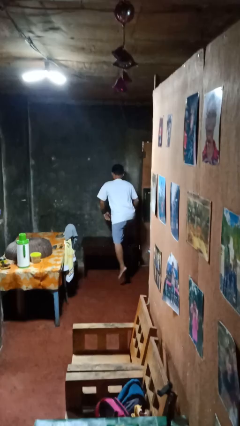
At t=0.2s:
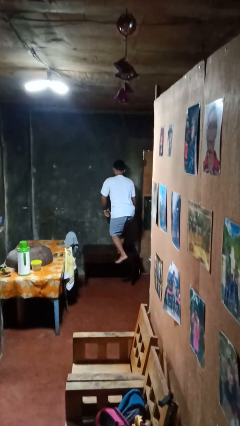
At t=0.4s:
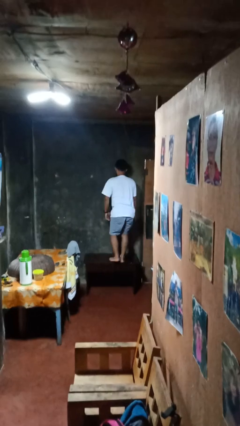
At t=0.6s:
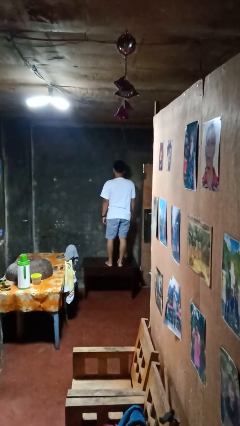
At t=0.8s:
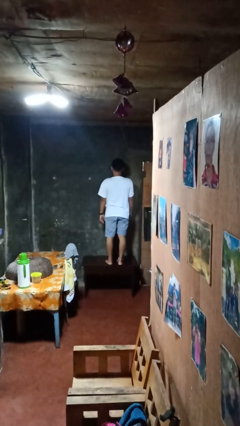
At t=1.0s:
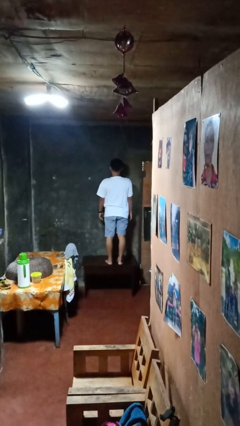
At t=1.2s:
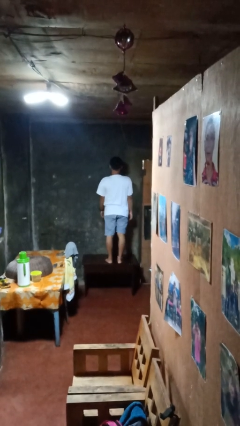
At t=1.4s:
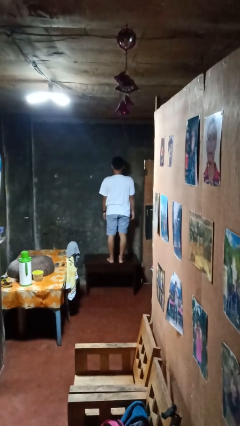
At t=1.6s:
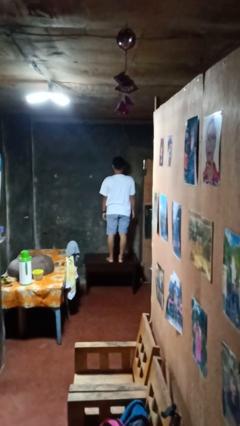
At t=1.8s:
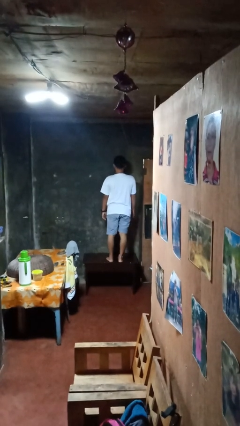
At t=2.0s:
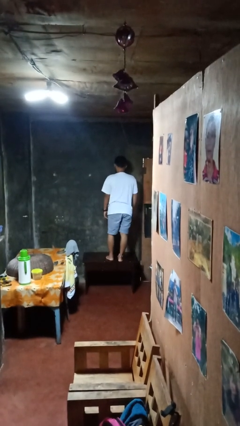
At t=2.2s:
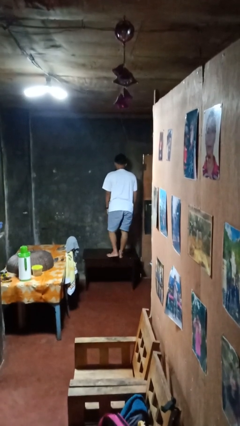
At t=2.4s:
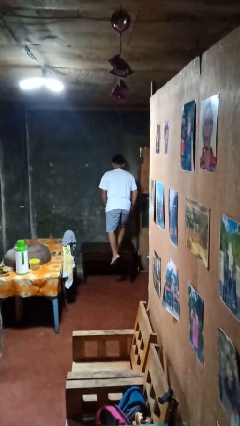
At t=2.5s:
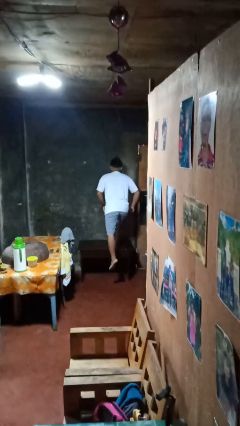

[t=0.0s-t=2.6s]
person climbs on table

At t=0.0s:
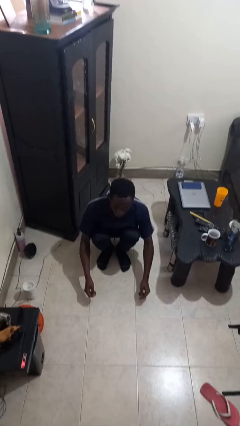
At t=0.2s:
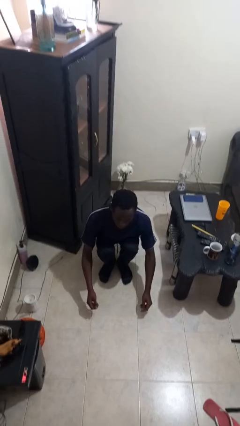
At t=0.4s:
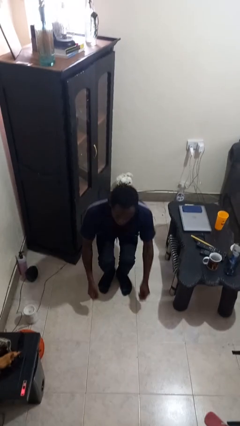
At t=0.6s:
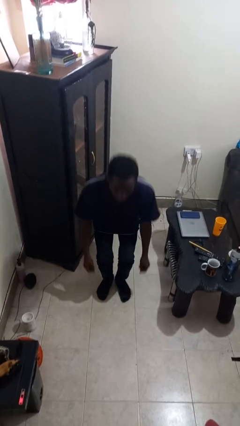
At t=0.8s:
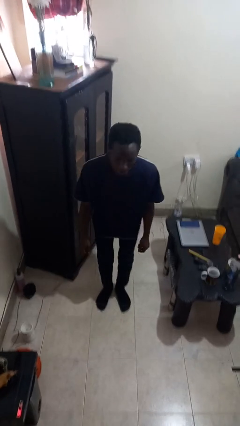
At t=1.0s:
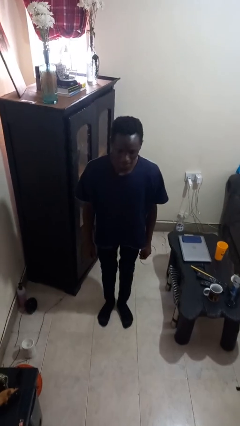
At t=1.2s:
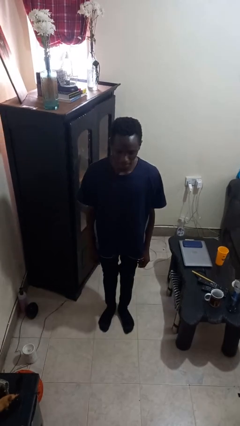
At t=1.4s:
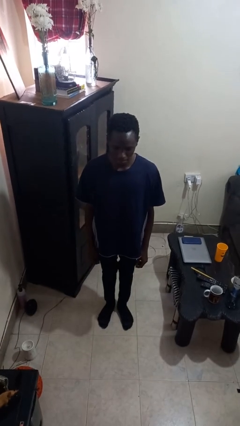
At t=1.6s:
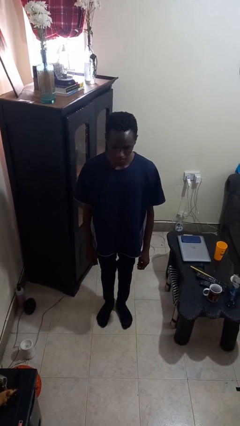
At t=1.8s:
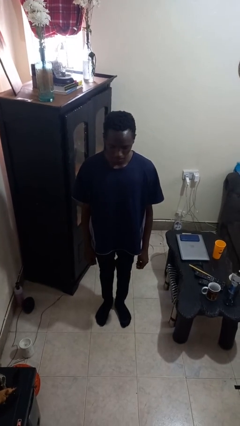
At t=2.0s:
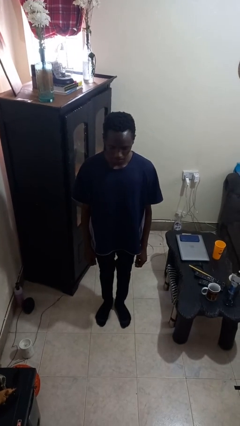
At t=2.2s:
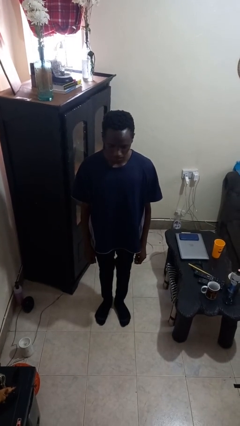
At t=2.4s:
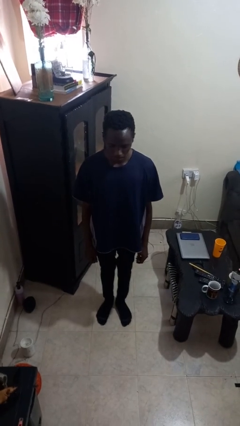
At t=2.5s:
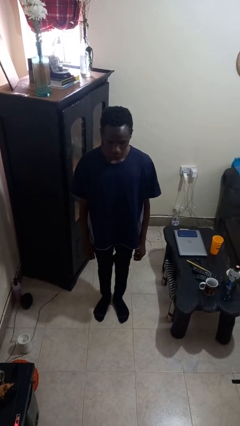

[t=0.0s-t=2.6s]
person stands up

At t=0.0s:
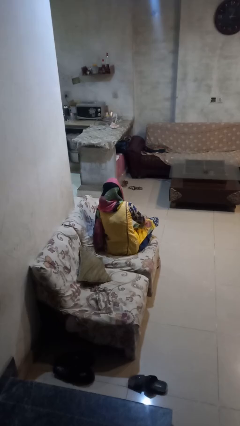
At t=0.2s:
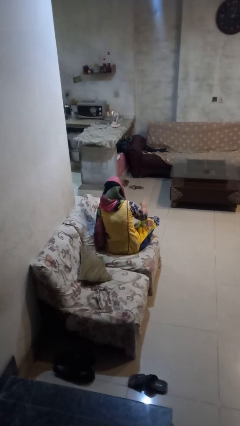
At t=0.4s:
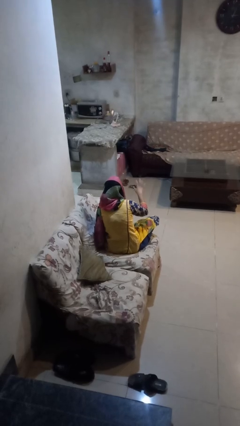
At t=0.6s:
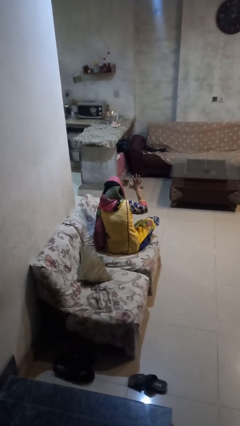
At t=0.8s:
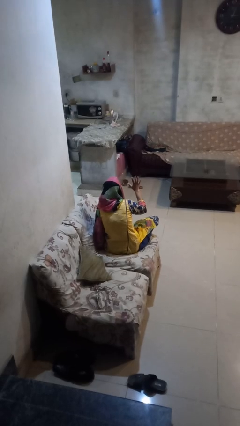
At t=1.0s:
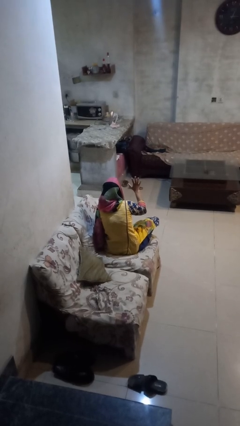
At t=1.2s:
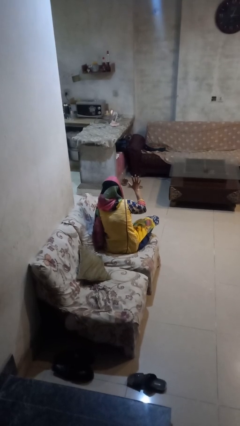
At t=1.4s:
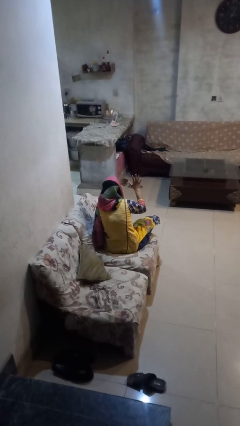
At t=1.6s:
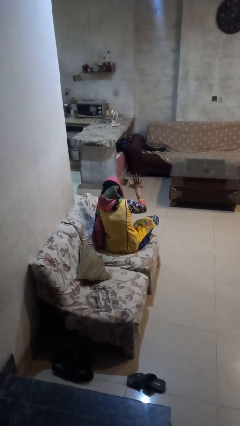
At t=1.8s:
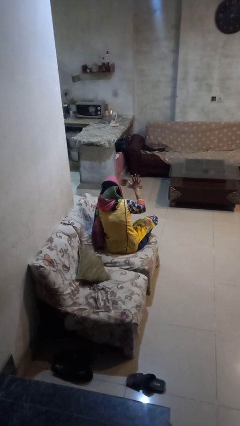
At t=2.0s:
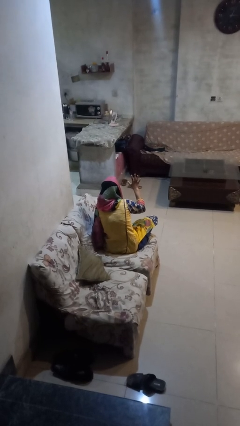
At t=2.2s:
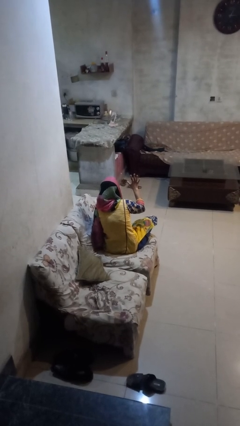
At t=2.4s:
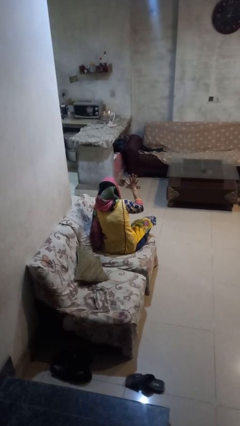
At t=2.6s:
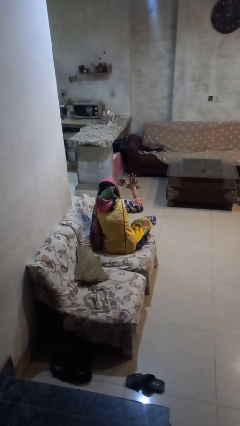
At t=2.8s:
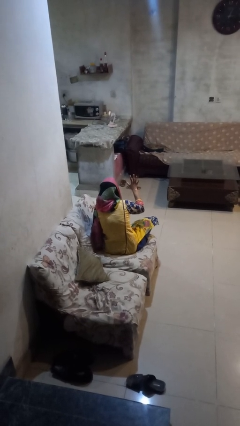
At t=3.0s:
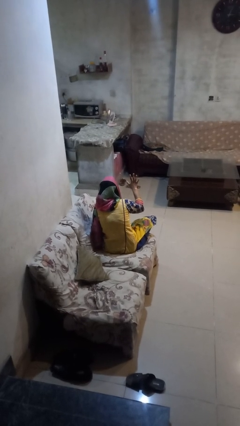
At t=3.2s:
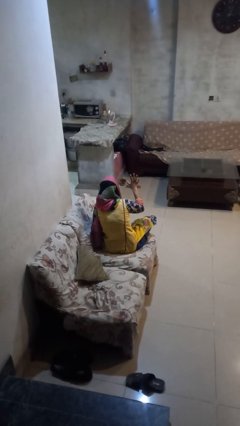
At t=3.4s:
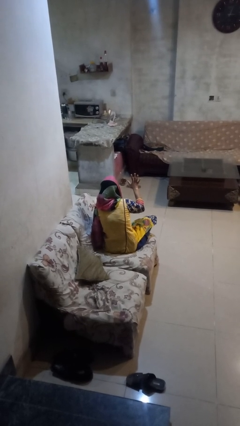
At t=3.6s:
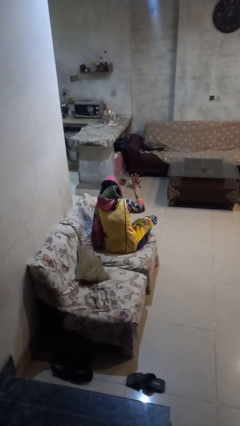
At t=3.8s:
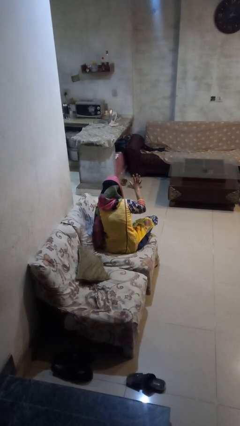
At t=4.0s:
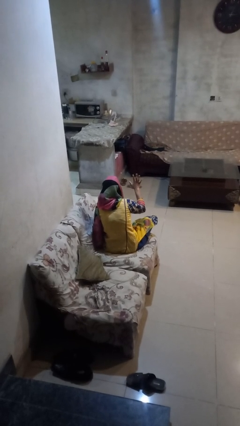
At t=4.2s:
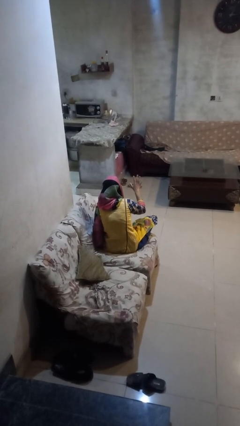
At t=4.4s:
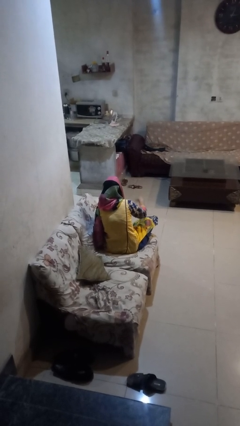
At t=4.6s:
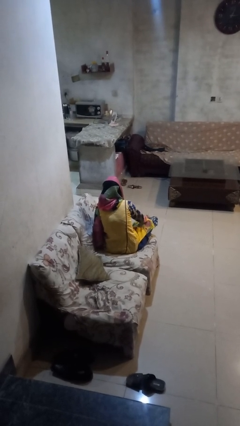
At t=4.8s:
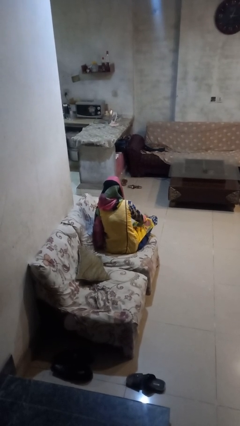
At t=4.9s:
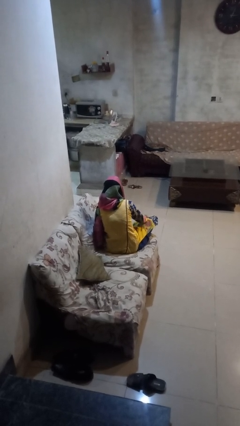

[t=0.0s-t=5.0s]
person gestures number five

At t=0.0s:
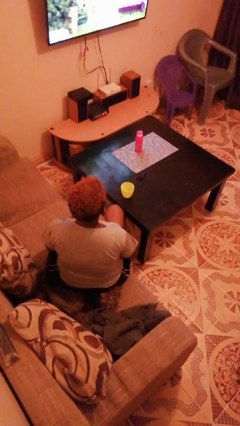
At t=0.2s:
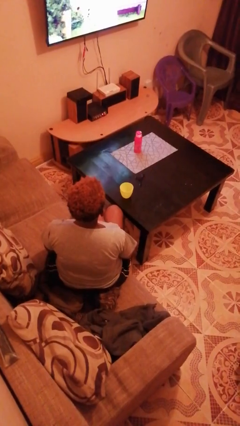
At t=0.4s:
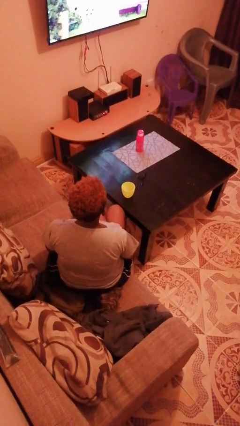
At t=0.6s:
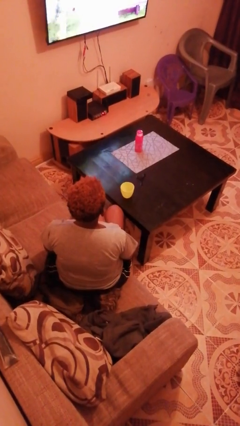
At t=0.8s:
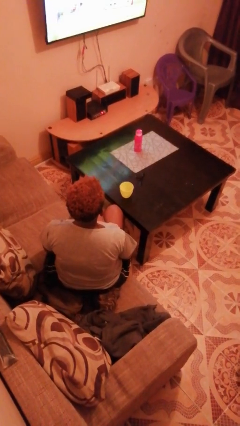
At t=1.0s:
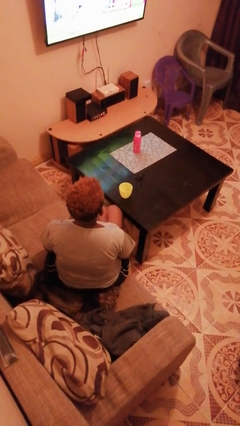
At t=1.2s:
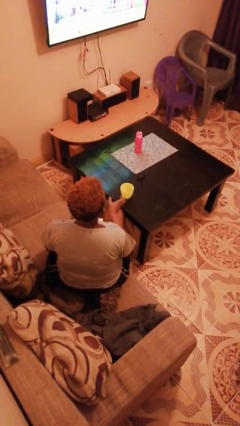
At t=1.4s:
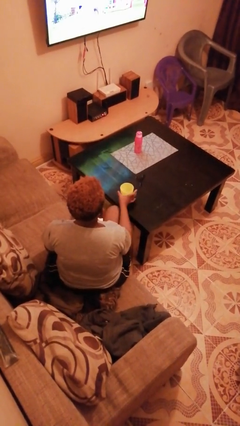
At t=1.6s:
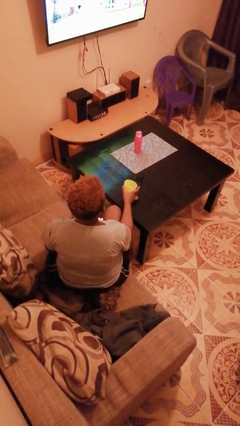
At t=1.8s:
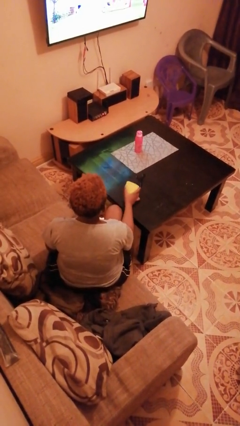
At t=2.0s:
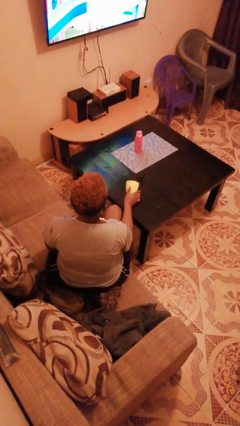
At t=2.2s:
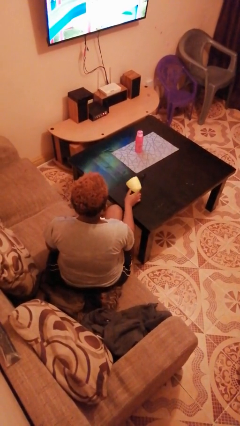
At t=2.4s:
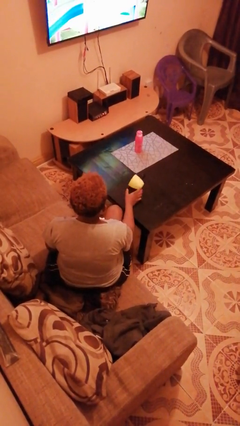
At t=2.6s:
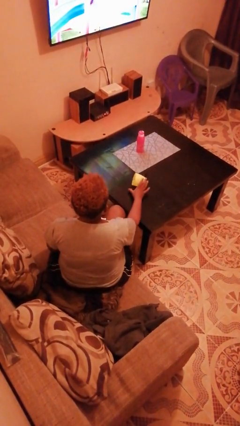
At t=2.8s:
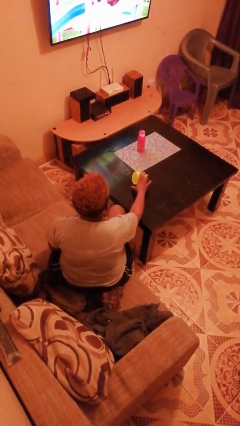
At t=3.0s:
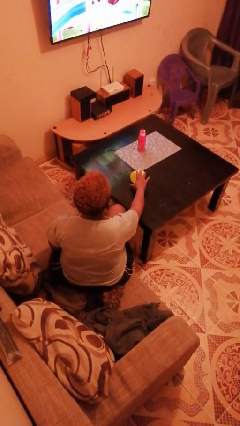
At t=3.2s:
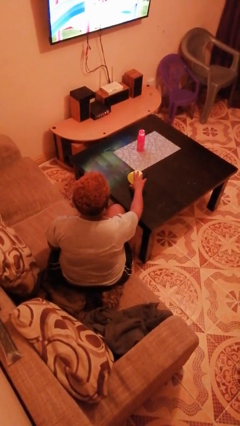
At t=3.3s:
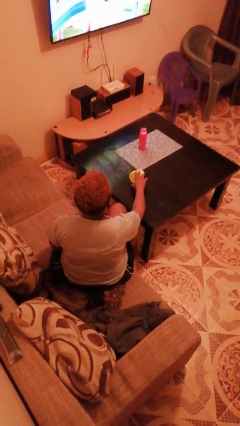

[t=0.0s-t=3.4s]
person spills on table

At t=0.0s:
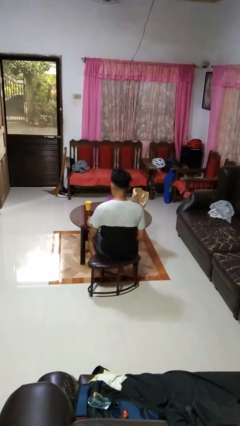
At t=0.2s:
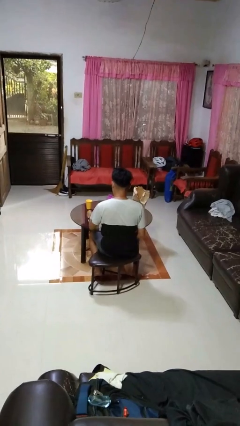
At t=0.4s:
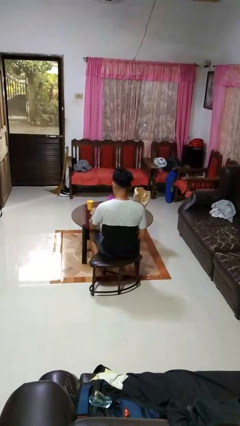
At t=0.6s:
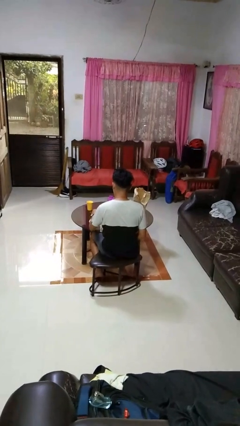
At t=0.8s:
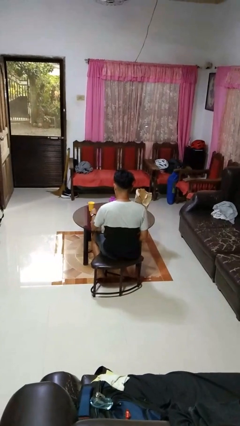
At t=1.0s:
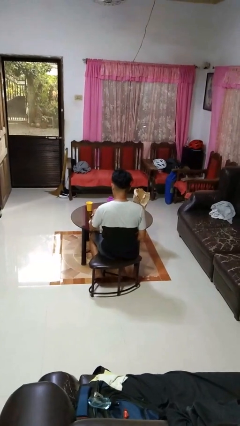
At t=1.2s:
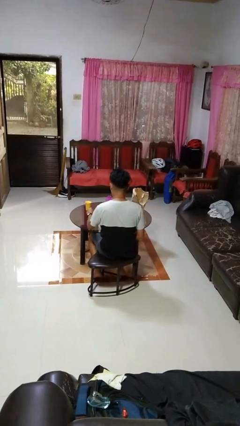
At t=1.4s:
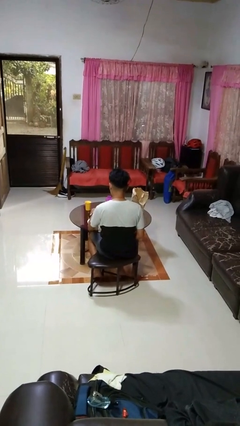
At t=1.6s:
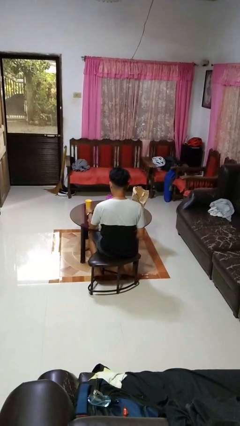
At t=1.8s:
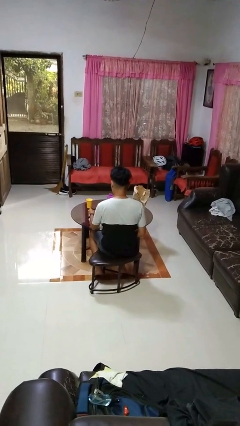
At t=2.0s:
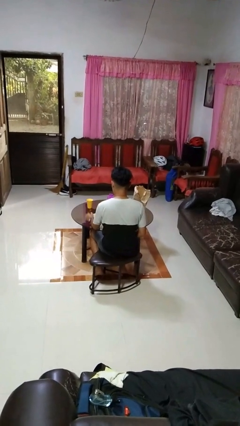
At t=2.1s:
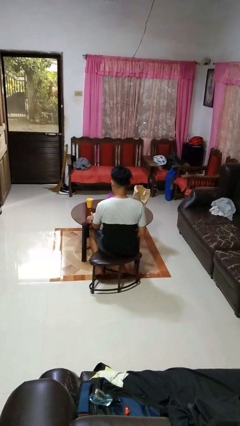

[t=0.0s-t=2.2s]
person stirs mug

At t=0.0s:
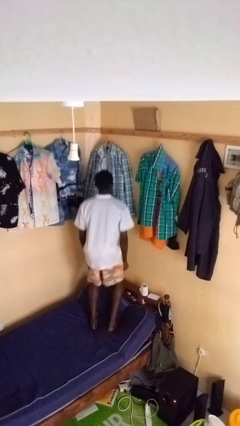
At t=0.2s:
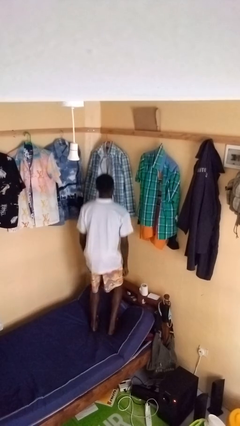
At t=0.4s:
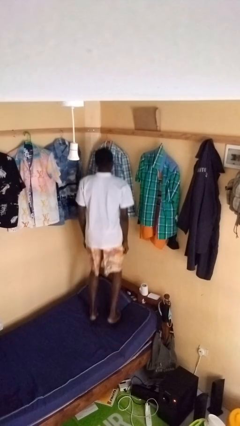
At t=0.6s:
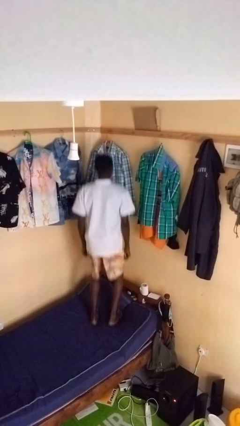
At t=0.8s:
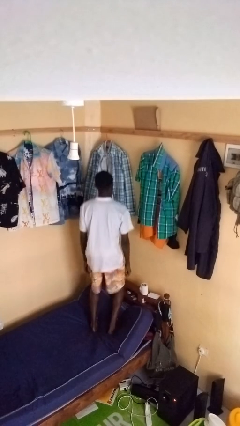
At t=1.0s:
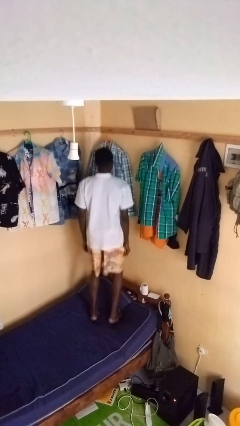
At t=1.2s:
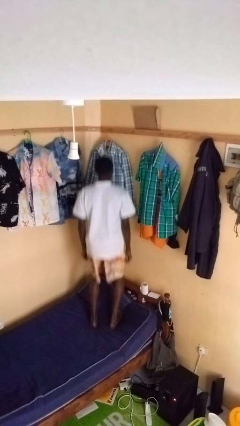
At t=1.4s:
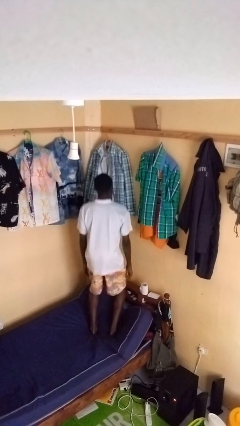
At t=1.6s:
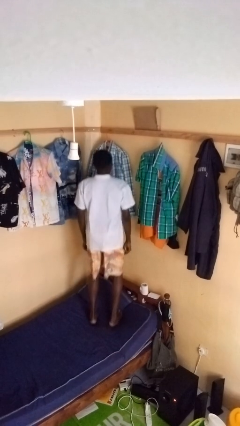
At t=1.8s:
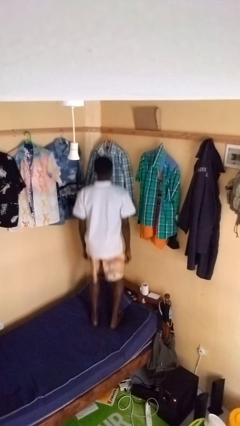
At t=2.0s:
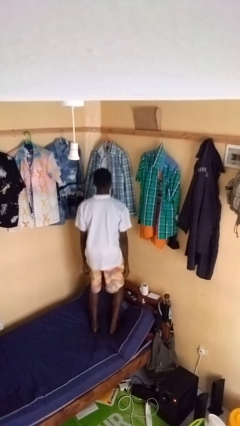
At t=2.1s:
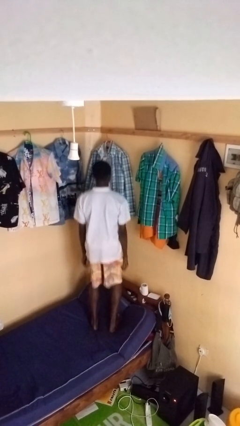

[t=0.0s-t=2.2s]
person jumps on bed
